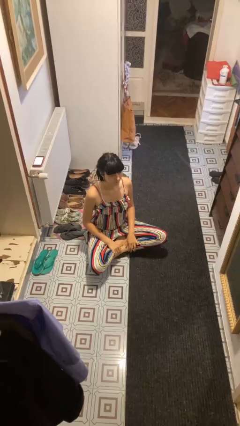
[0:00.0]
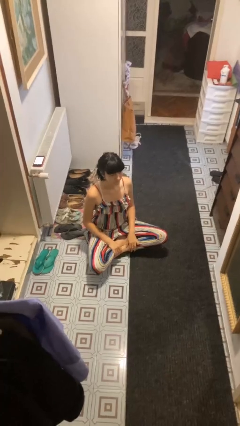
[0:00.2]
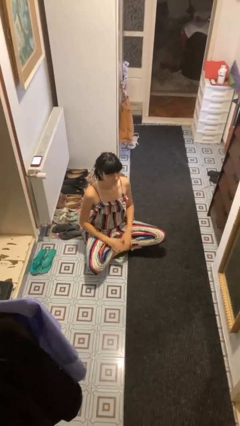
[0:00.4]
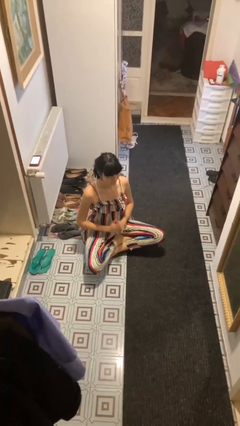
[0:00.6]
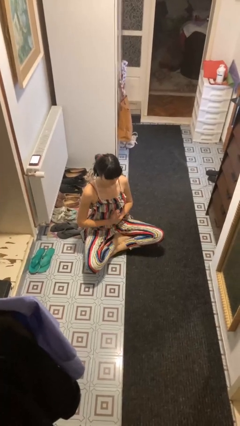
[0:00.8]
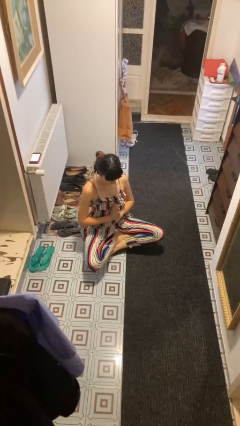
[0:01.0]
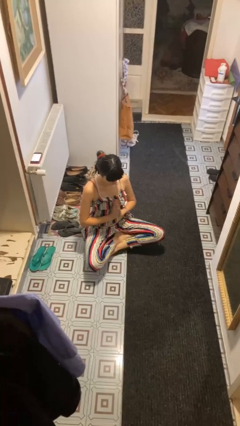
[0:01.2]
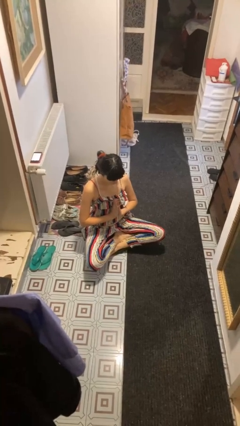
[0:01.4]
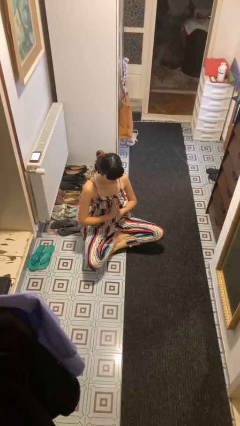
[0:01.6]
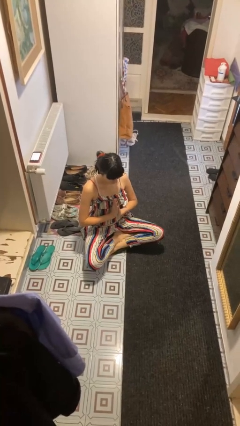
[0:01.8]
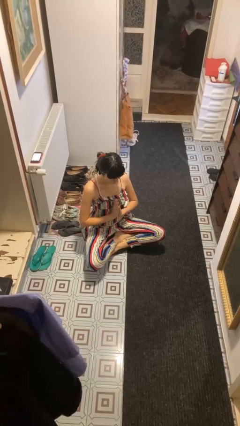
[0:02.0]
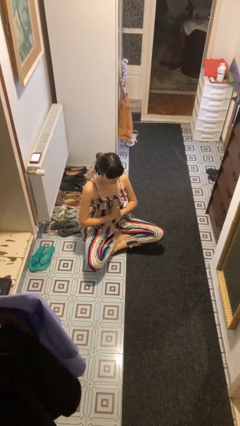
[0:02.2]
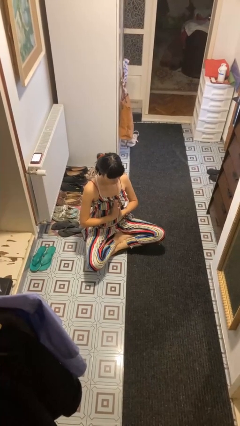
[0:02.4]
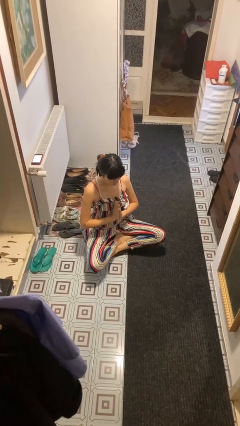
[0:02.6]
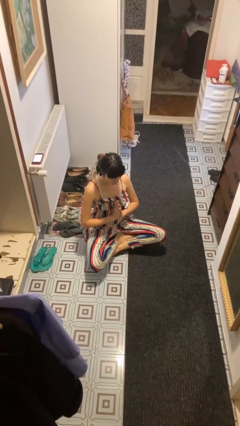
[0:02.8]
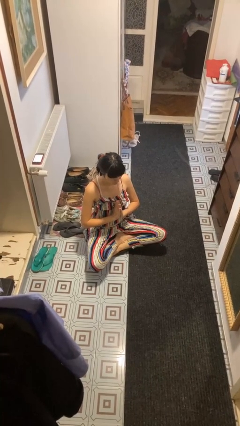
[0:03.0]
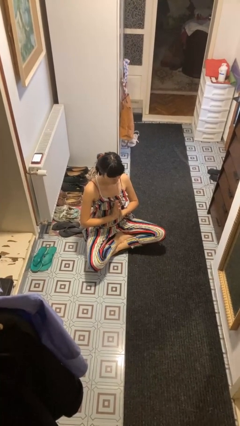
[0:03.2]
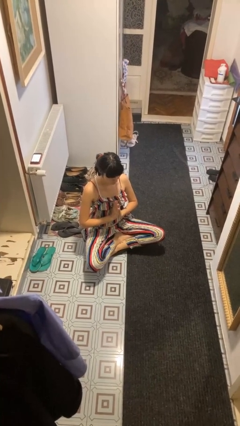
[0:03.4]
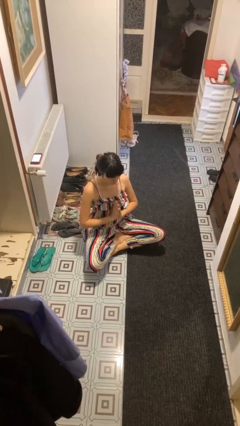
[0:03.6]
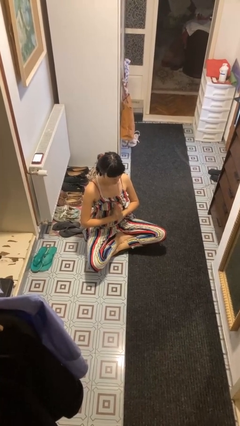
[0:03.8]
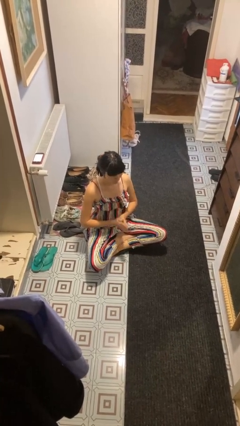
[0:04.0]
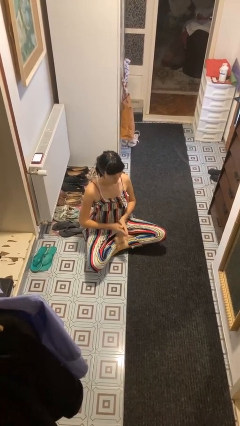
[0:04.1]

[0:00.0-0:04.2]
person prays

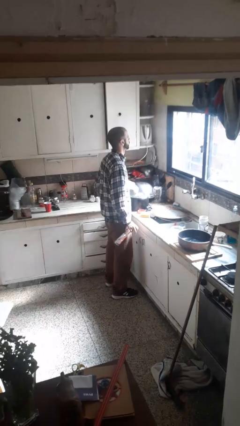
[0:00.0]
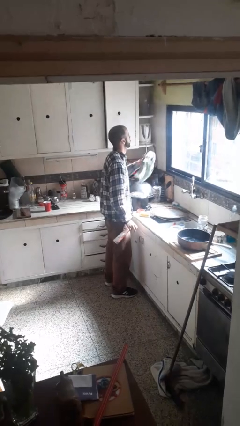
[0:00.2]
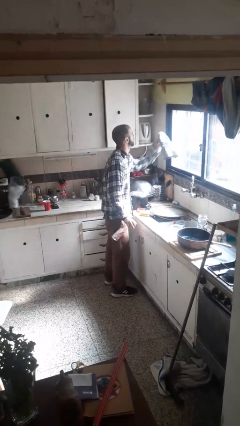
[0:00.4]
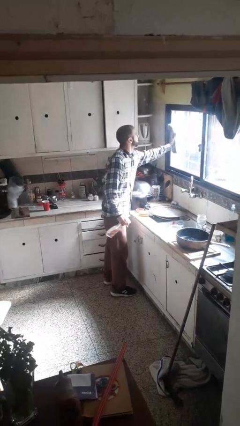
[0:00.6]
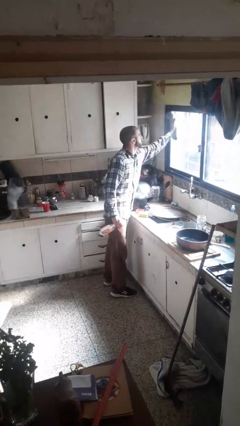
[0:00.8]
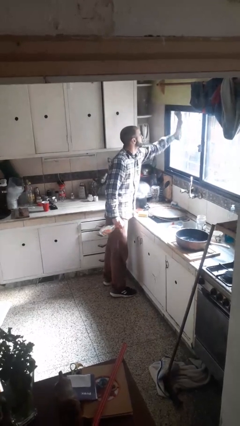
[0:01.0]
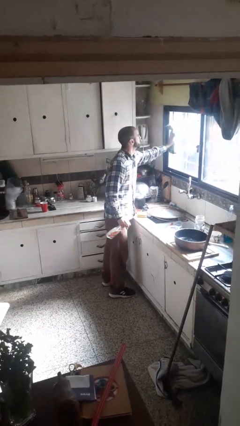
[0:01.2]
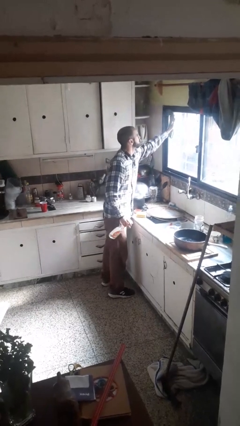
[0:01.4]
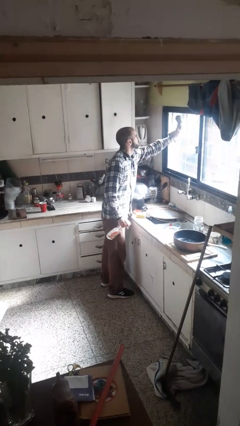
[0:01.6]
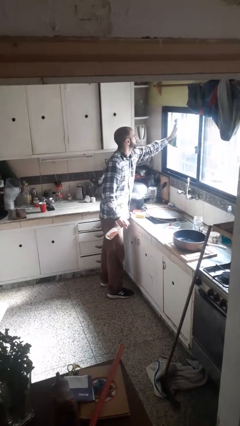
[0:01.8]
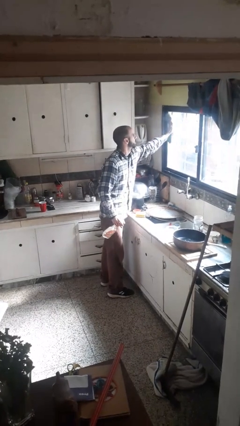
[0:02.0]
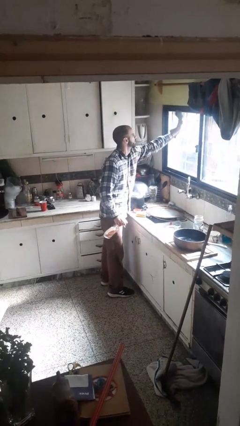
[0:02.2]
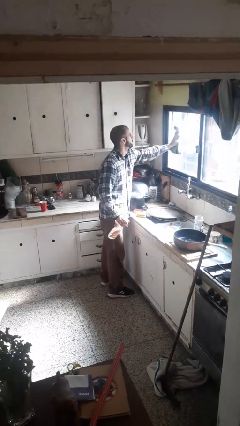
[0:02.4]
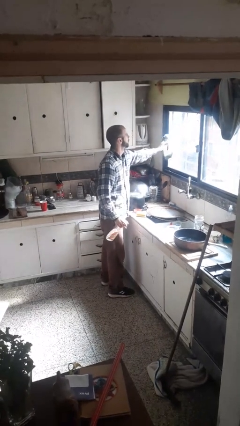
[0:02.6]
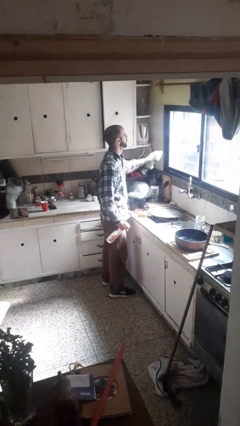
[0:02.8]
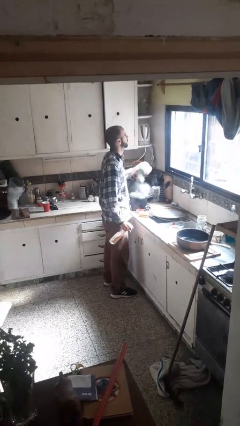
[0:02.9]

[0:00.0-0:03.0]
person washes window

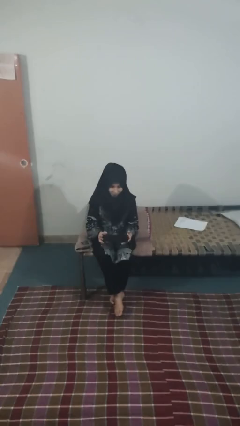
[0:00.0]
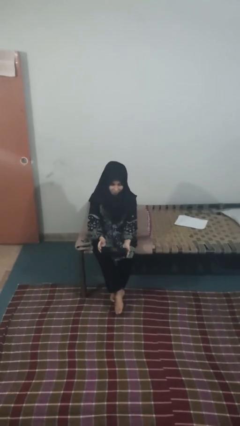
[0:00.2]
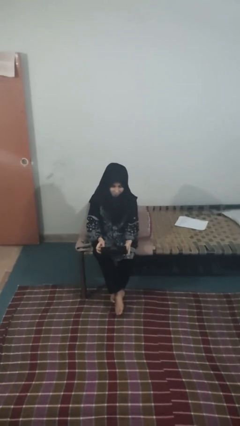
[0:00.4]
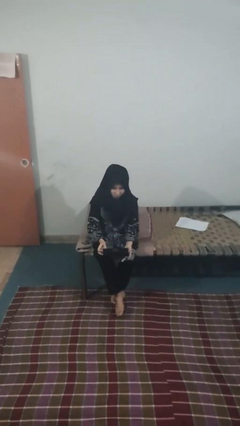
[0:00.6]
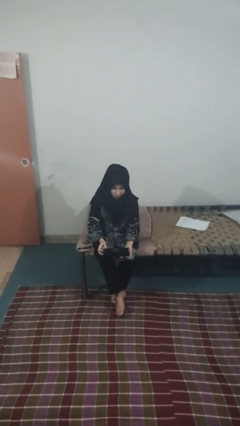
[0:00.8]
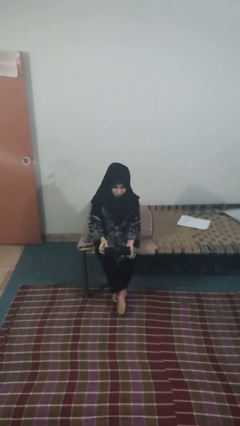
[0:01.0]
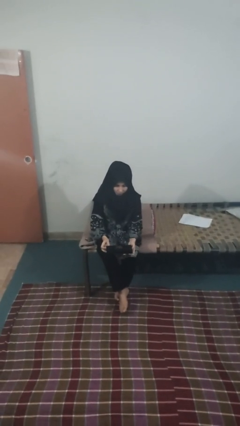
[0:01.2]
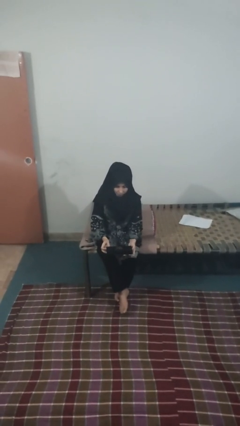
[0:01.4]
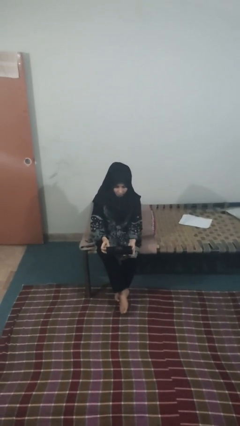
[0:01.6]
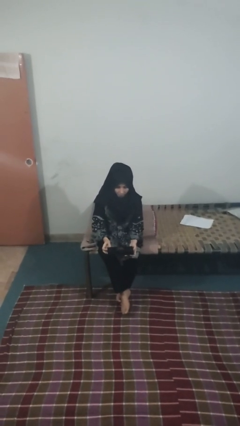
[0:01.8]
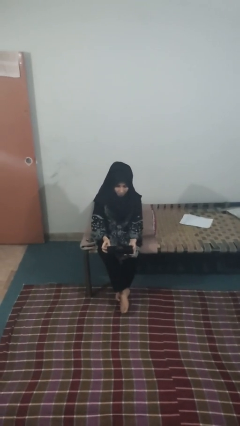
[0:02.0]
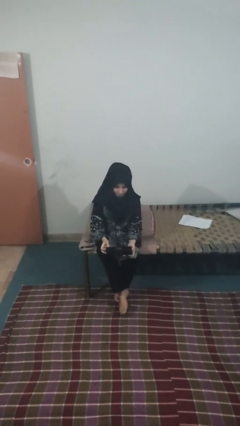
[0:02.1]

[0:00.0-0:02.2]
person closes jewelry box

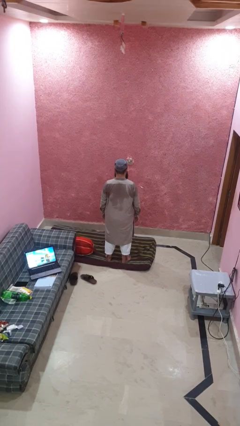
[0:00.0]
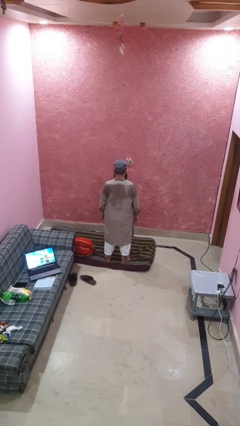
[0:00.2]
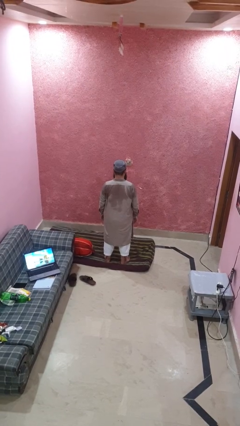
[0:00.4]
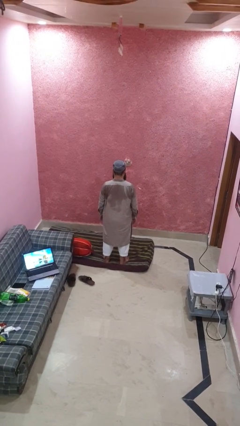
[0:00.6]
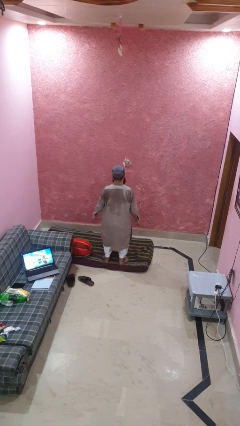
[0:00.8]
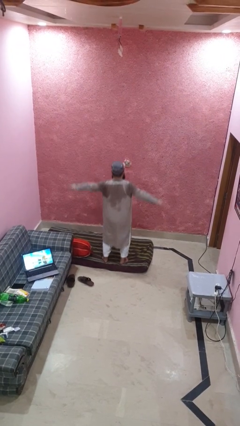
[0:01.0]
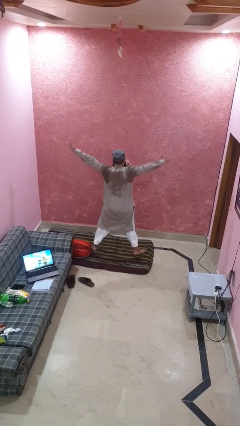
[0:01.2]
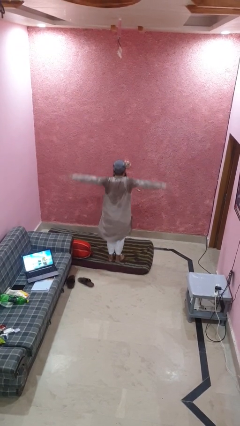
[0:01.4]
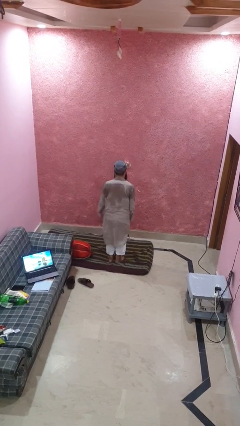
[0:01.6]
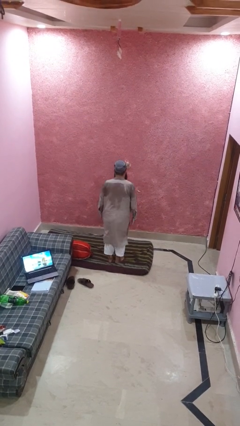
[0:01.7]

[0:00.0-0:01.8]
person exercises with jumping jacks

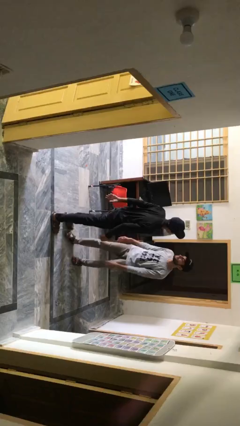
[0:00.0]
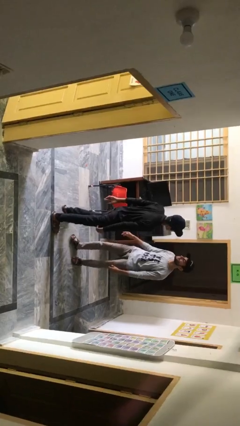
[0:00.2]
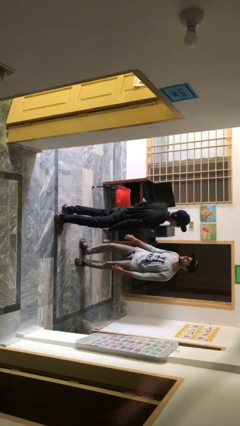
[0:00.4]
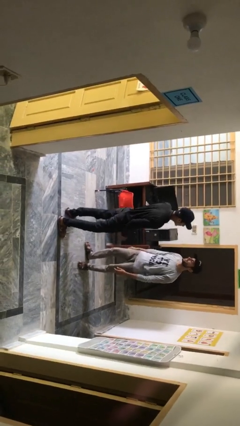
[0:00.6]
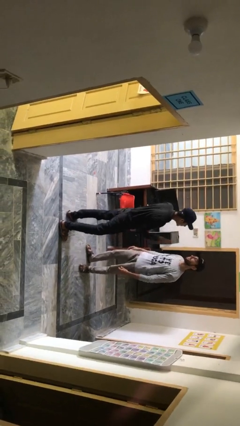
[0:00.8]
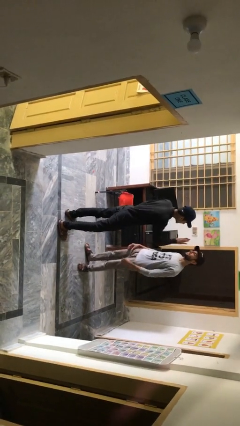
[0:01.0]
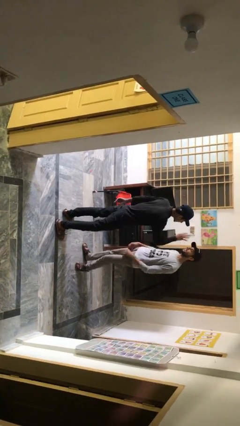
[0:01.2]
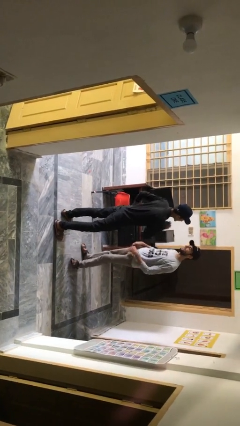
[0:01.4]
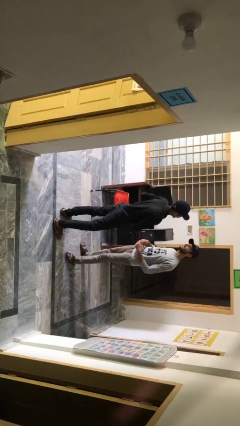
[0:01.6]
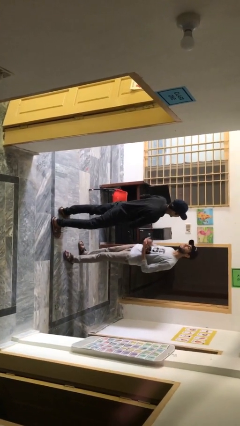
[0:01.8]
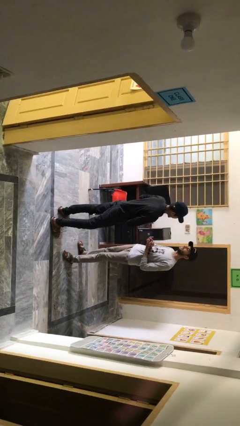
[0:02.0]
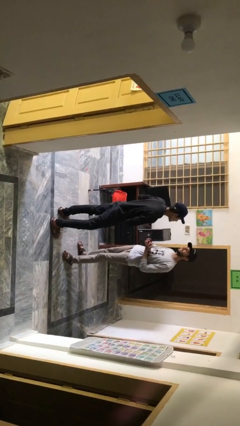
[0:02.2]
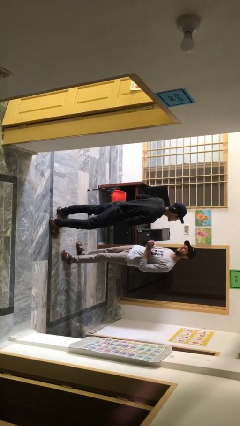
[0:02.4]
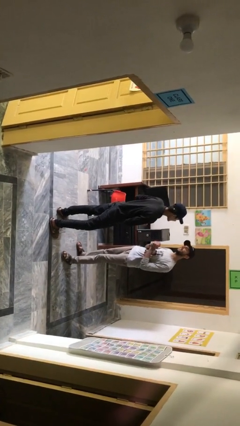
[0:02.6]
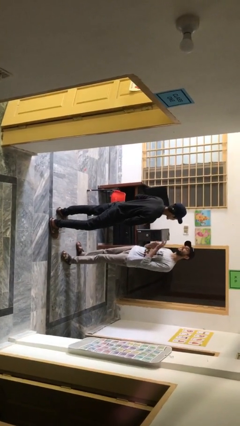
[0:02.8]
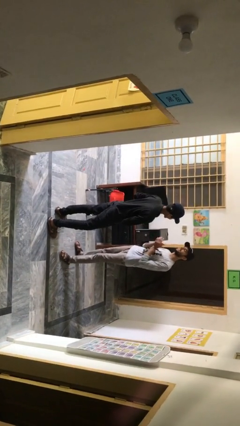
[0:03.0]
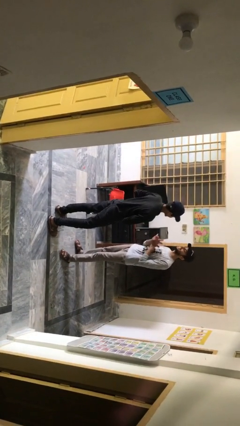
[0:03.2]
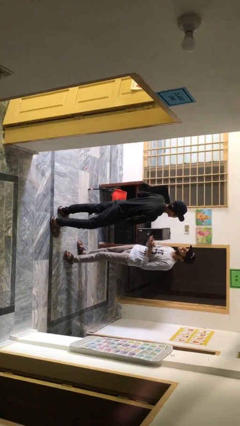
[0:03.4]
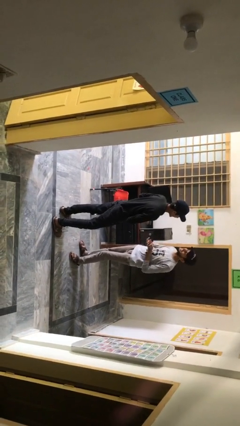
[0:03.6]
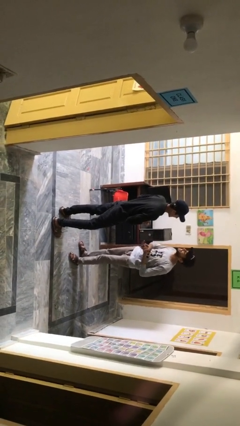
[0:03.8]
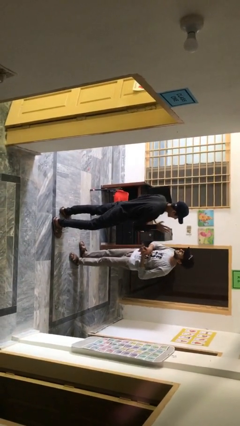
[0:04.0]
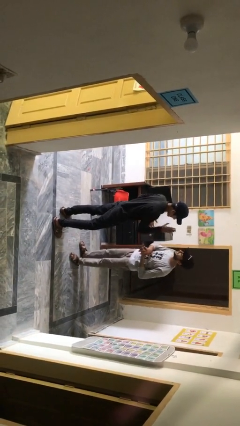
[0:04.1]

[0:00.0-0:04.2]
person talks to person

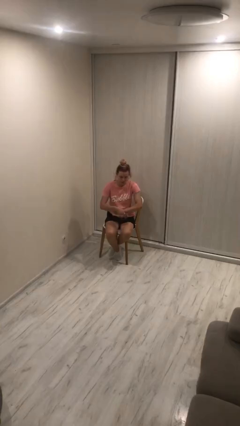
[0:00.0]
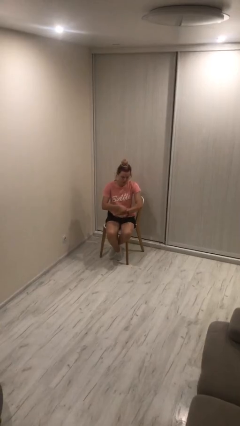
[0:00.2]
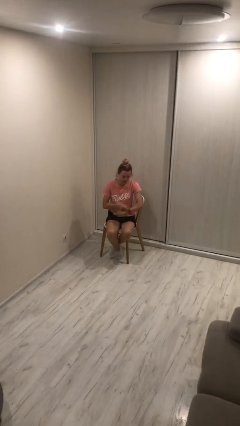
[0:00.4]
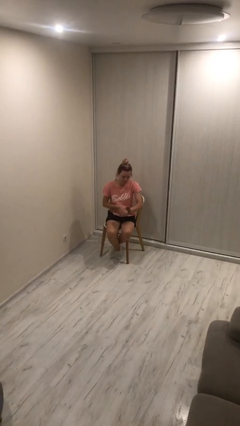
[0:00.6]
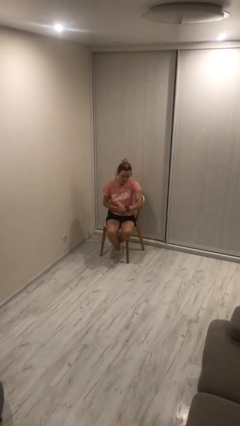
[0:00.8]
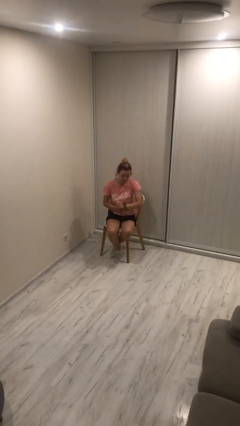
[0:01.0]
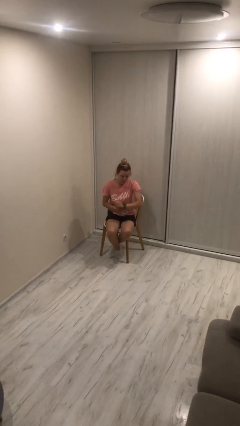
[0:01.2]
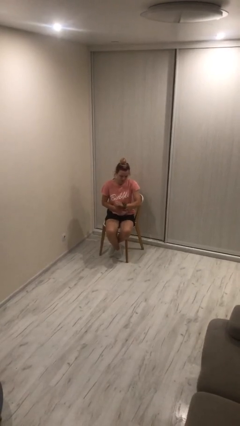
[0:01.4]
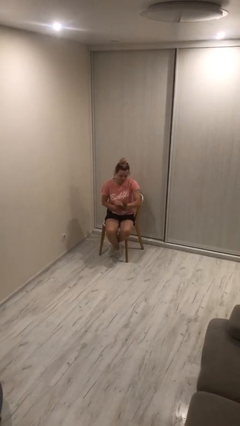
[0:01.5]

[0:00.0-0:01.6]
person puts on wristwatch

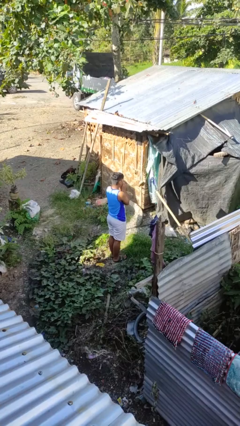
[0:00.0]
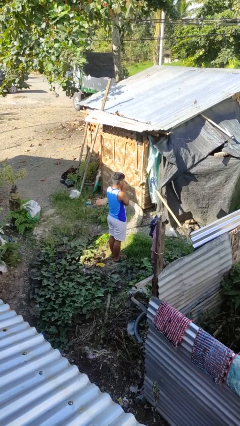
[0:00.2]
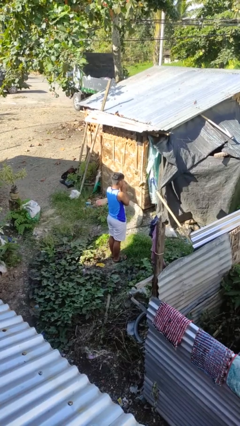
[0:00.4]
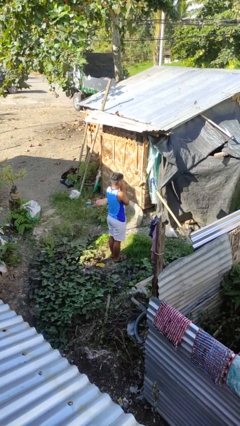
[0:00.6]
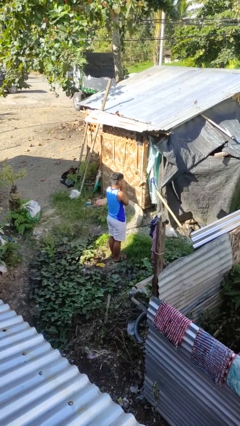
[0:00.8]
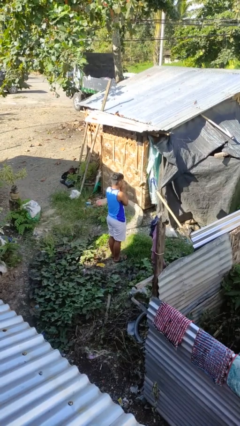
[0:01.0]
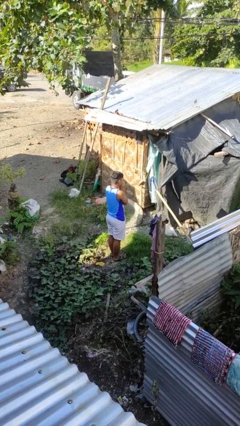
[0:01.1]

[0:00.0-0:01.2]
person blows into hands
